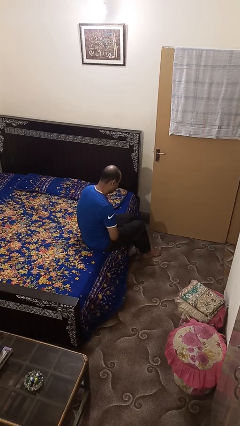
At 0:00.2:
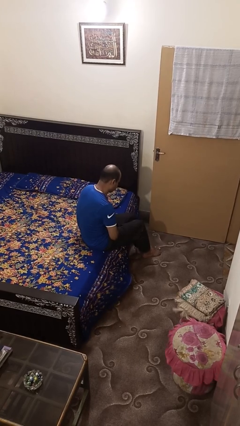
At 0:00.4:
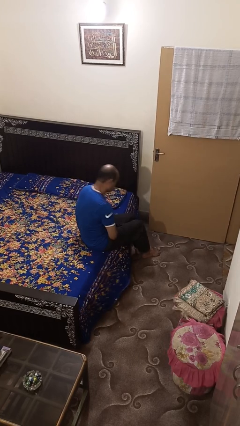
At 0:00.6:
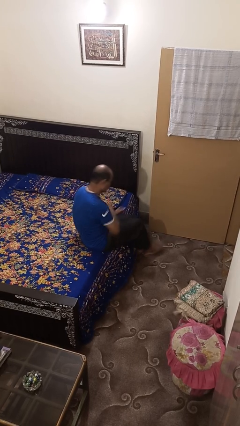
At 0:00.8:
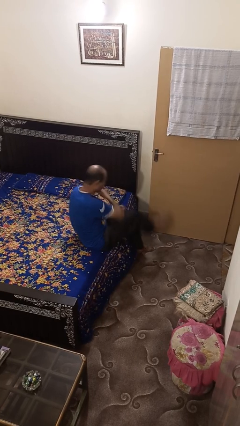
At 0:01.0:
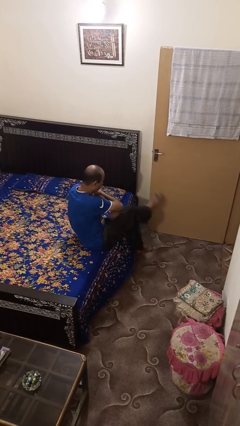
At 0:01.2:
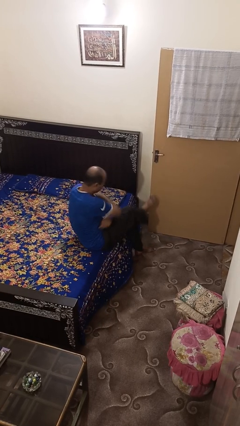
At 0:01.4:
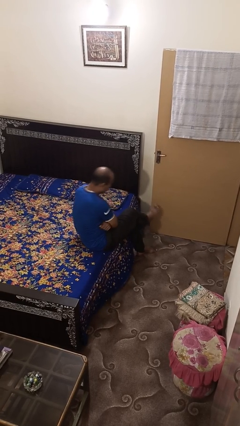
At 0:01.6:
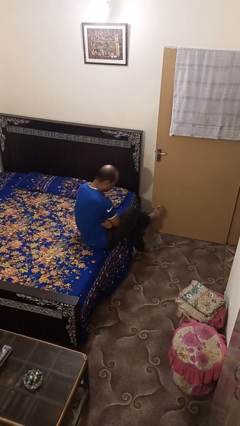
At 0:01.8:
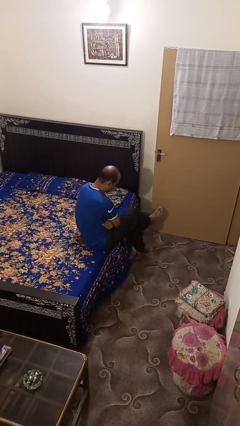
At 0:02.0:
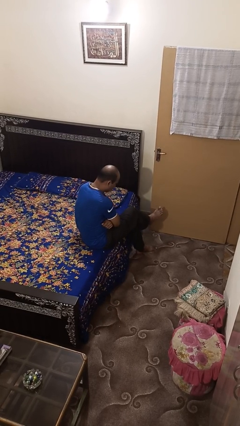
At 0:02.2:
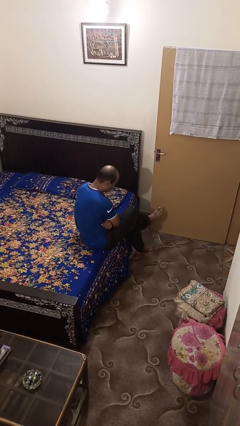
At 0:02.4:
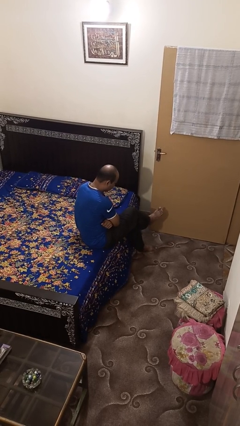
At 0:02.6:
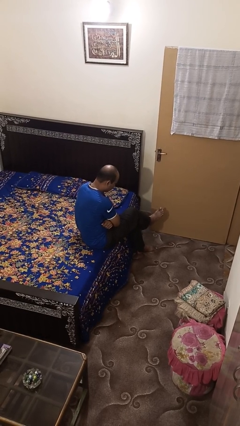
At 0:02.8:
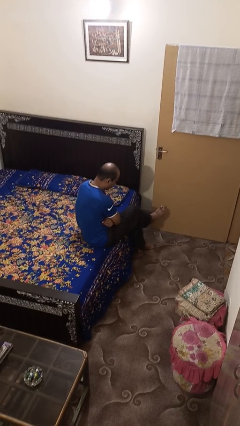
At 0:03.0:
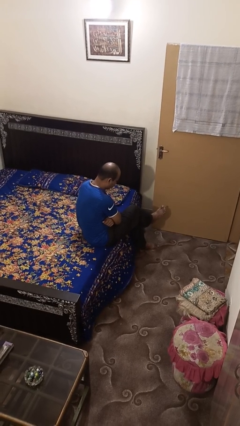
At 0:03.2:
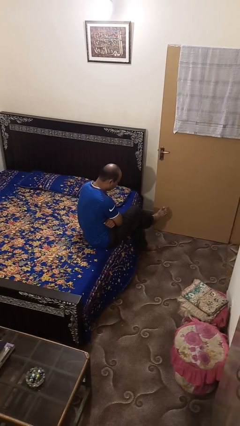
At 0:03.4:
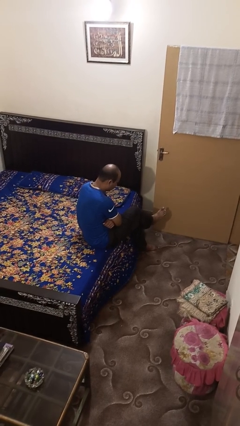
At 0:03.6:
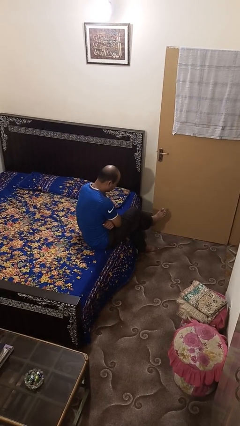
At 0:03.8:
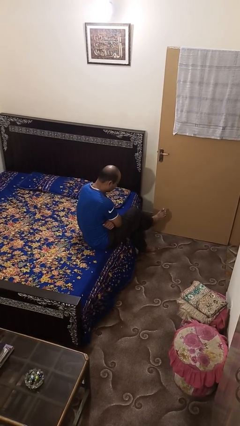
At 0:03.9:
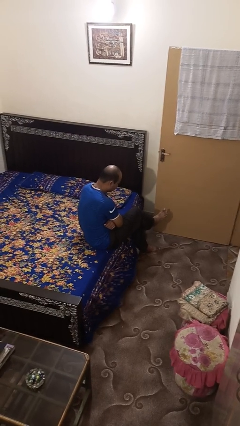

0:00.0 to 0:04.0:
person crosses legs

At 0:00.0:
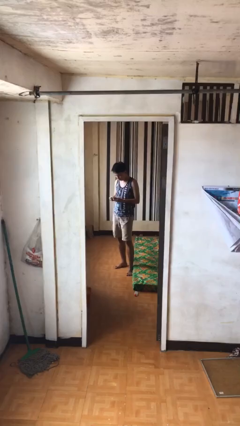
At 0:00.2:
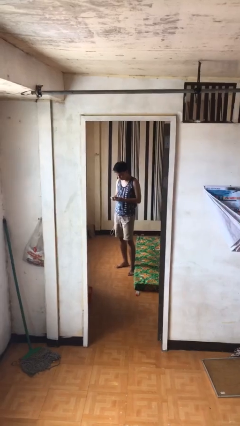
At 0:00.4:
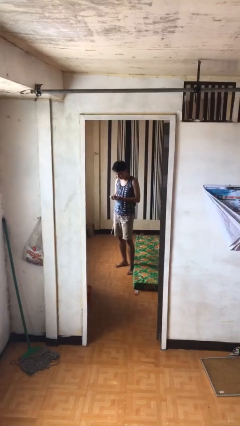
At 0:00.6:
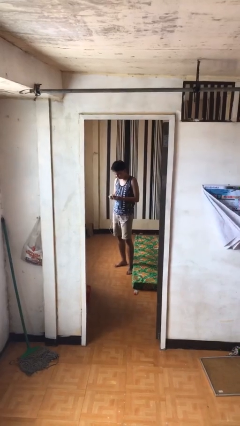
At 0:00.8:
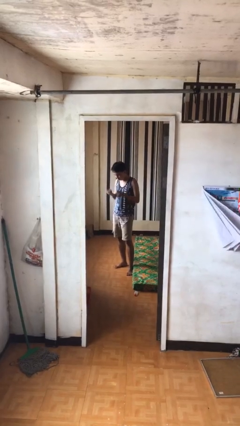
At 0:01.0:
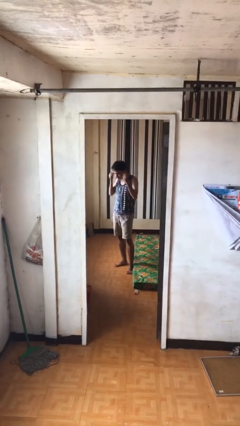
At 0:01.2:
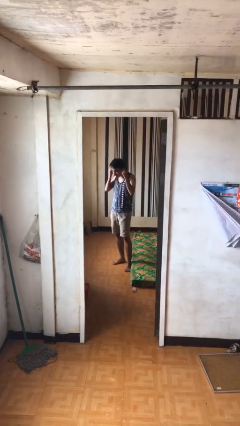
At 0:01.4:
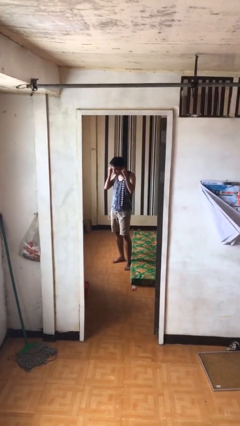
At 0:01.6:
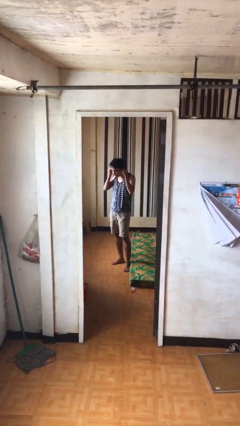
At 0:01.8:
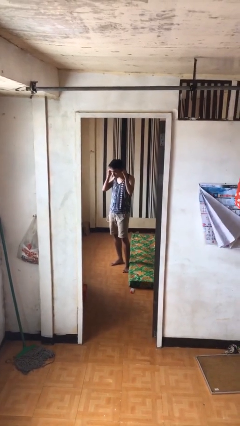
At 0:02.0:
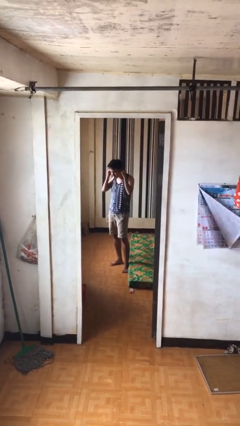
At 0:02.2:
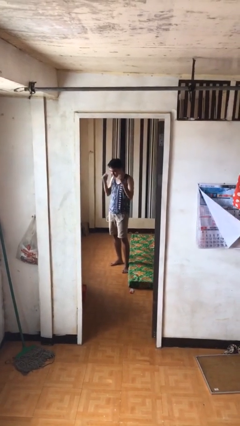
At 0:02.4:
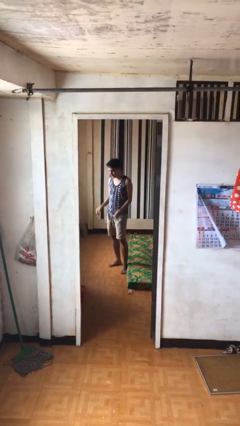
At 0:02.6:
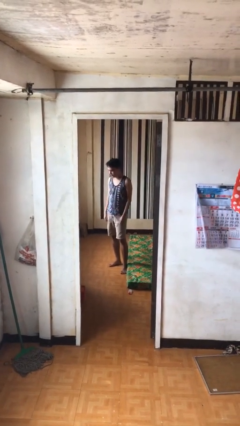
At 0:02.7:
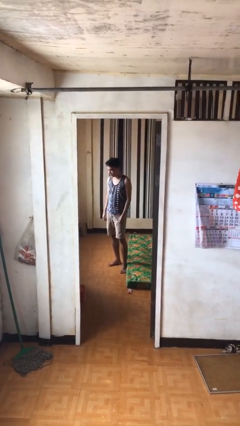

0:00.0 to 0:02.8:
person puts on headphones

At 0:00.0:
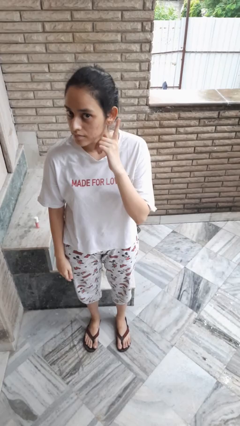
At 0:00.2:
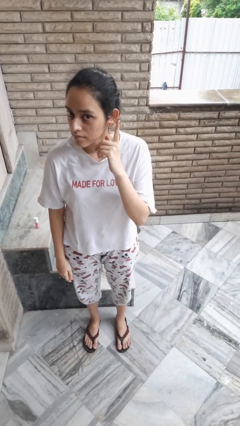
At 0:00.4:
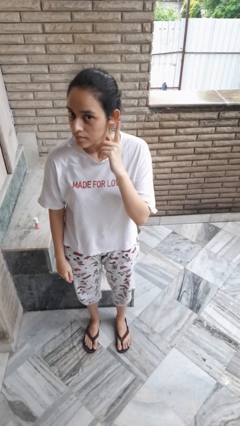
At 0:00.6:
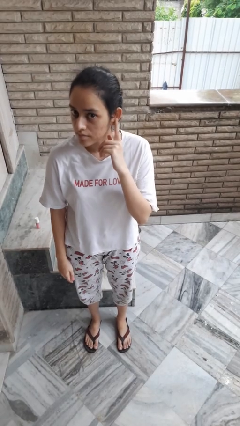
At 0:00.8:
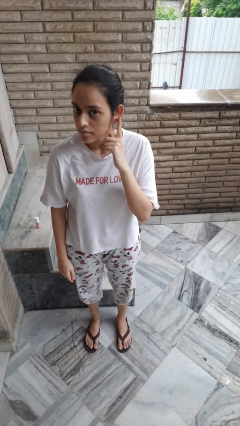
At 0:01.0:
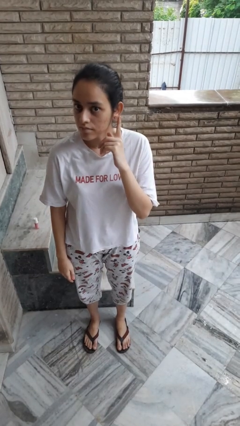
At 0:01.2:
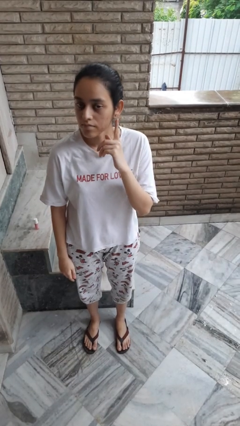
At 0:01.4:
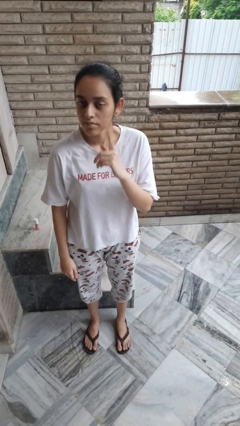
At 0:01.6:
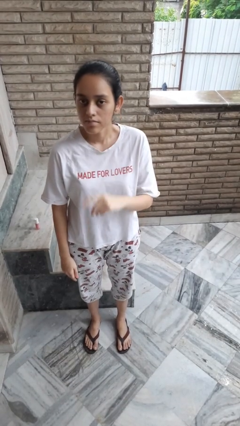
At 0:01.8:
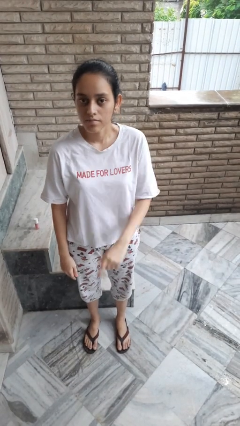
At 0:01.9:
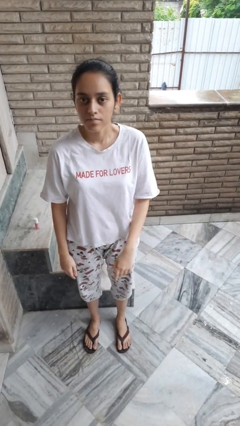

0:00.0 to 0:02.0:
person gestures listen closely

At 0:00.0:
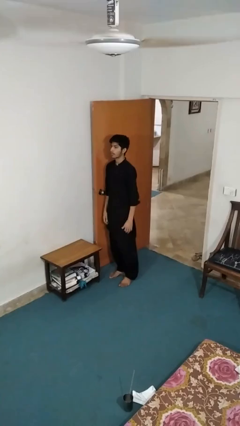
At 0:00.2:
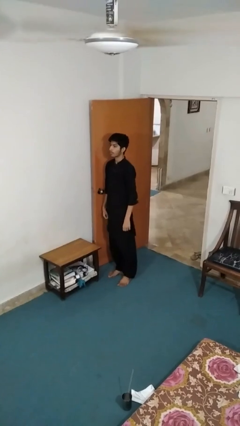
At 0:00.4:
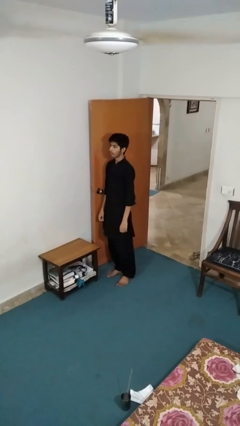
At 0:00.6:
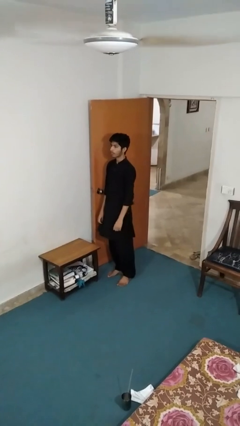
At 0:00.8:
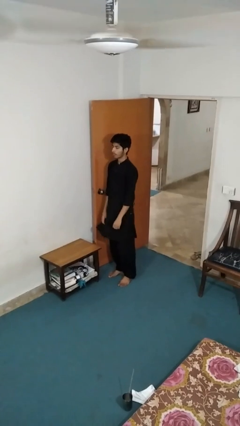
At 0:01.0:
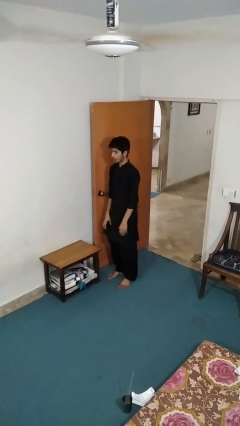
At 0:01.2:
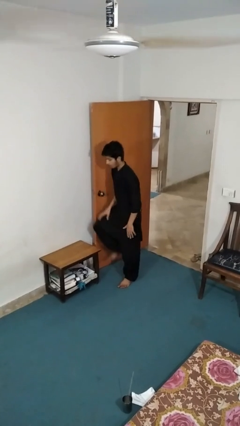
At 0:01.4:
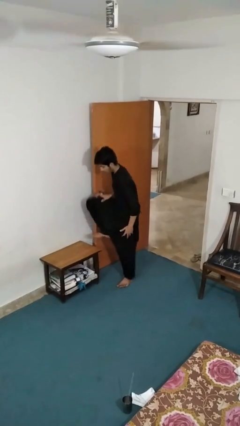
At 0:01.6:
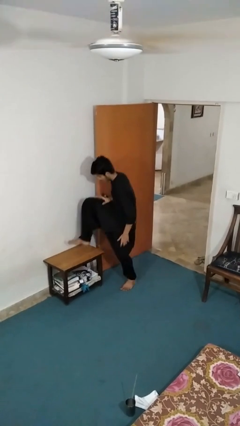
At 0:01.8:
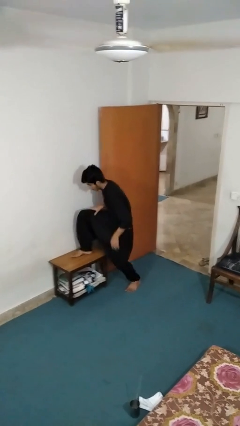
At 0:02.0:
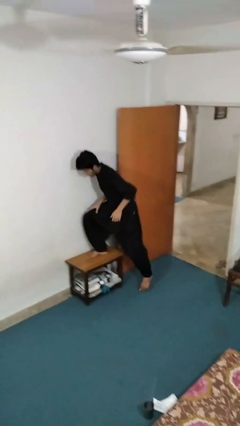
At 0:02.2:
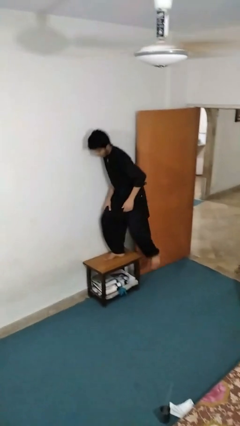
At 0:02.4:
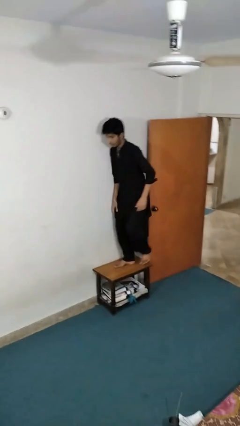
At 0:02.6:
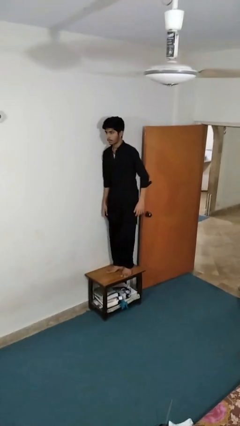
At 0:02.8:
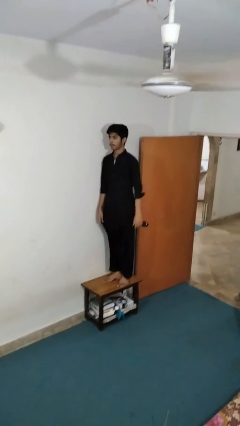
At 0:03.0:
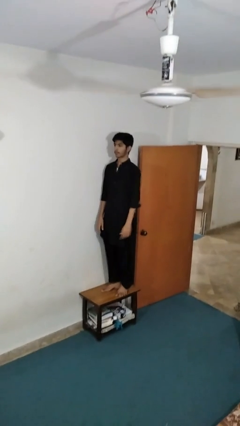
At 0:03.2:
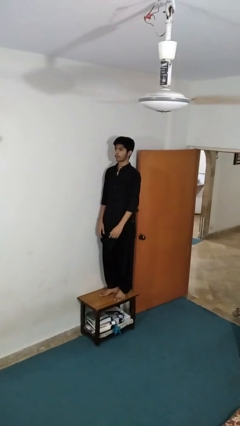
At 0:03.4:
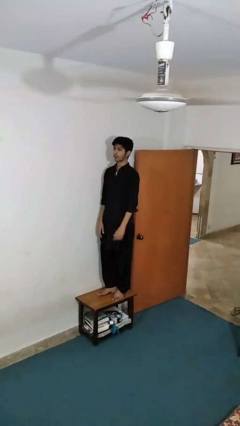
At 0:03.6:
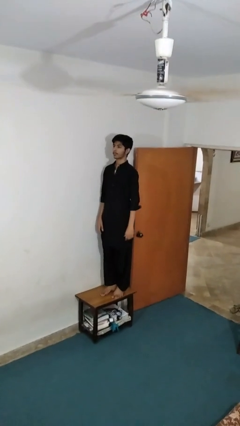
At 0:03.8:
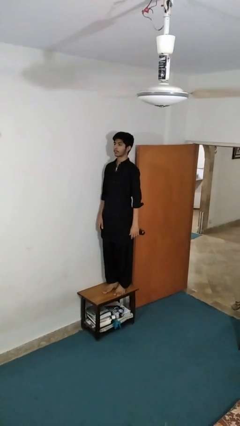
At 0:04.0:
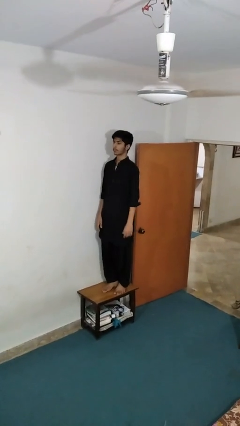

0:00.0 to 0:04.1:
person climbs on table

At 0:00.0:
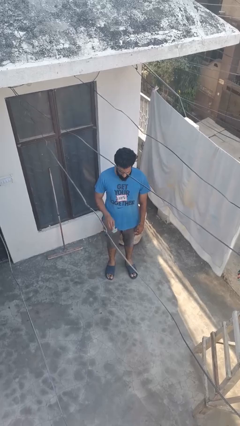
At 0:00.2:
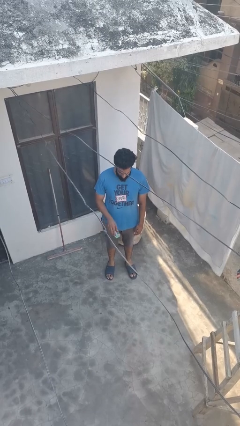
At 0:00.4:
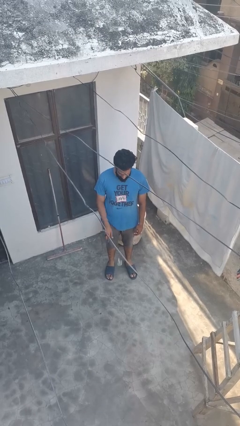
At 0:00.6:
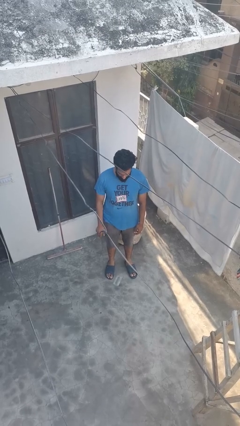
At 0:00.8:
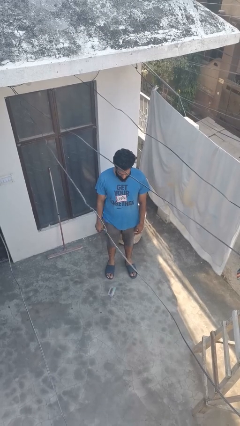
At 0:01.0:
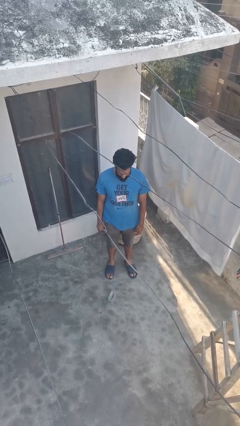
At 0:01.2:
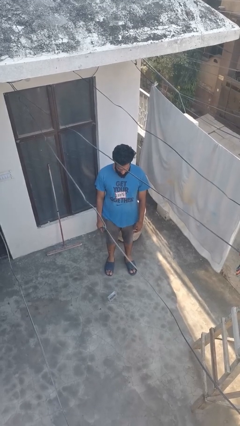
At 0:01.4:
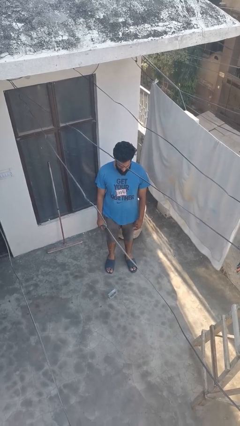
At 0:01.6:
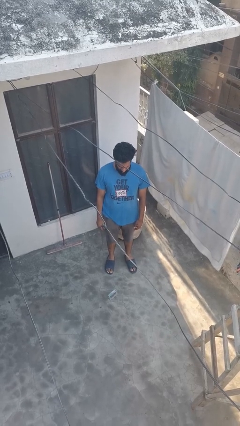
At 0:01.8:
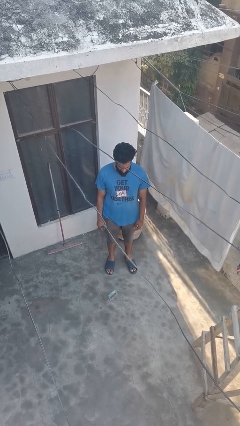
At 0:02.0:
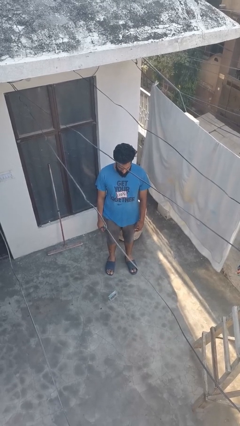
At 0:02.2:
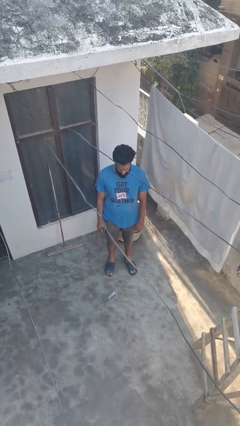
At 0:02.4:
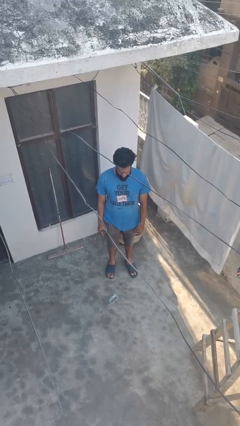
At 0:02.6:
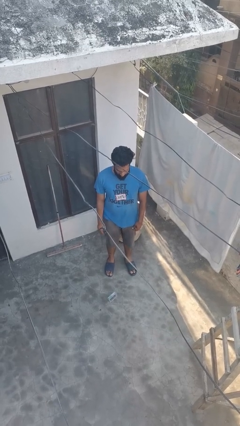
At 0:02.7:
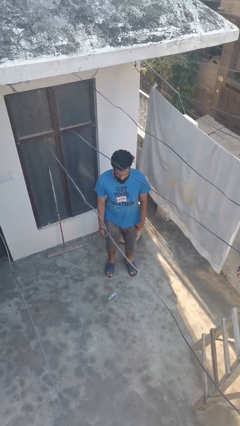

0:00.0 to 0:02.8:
person throws object into air

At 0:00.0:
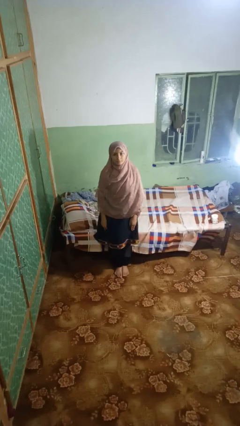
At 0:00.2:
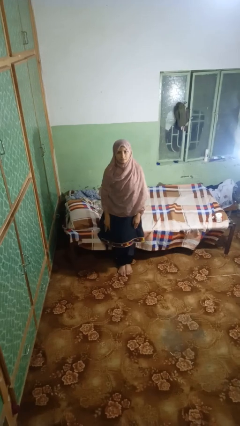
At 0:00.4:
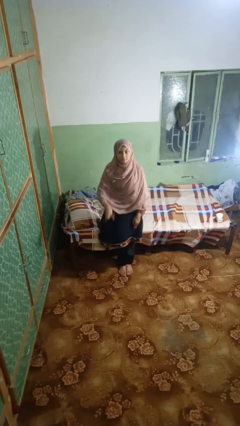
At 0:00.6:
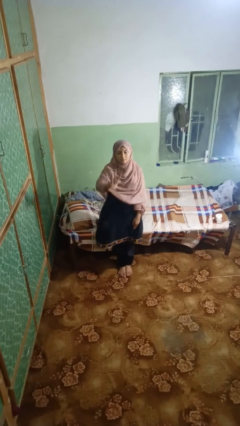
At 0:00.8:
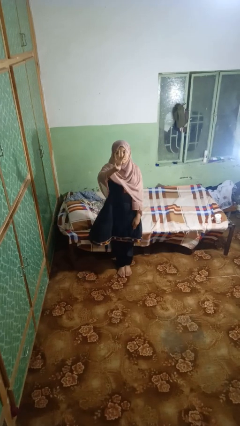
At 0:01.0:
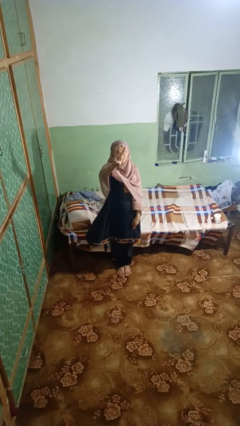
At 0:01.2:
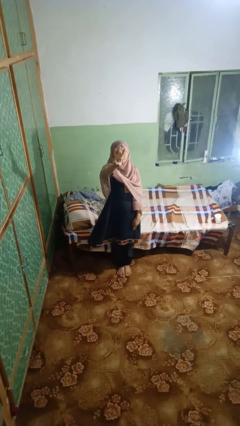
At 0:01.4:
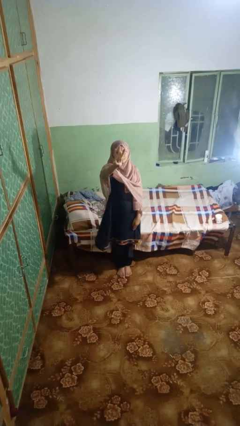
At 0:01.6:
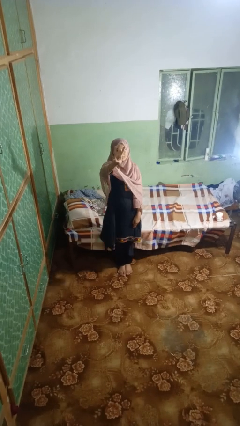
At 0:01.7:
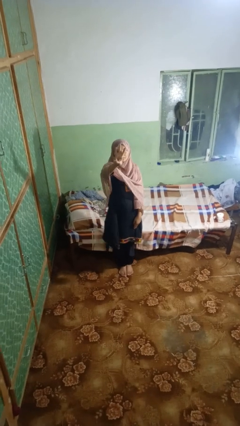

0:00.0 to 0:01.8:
person gestures number three
